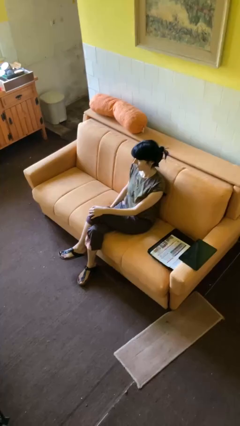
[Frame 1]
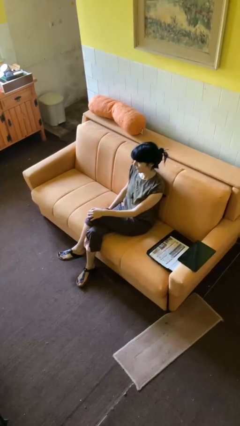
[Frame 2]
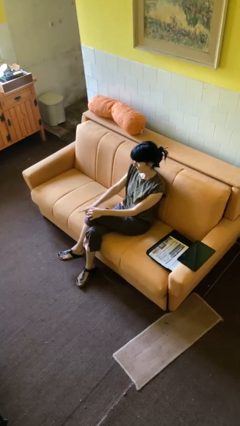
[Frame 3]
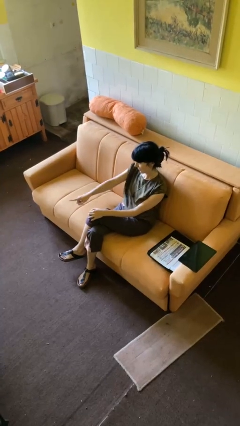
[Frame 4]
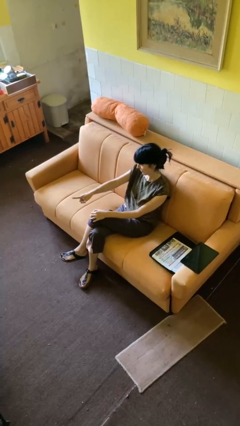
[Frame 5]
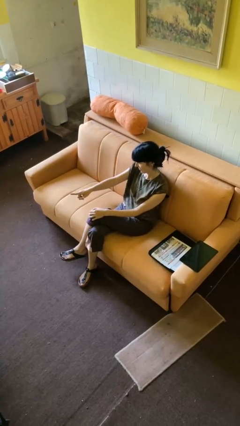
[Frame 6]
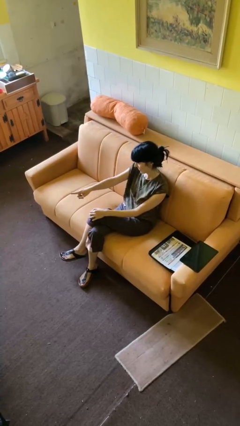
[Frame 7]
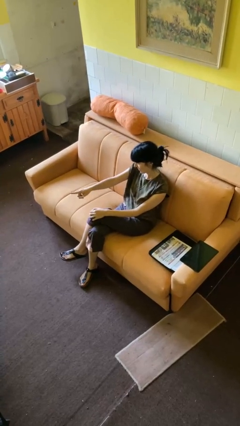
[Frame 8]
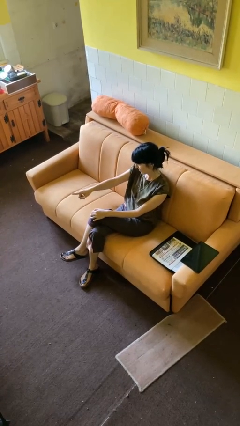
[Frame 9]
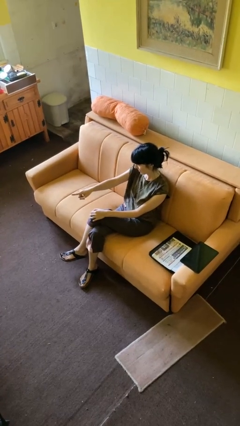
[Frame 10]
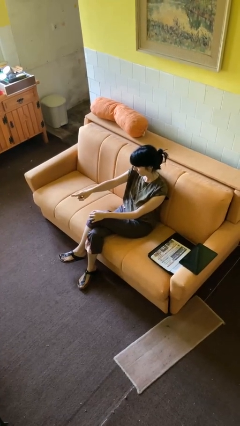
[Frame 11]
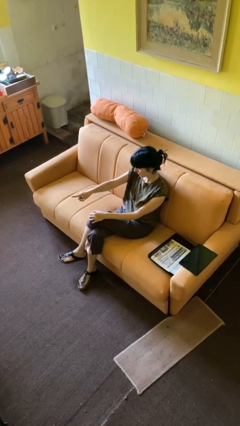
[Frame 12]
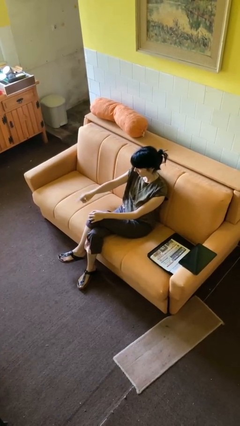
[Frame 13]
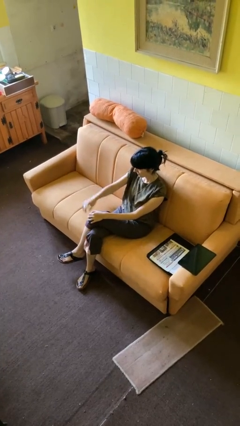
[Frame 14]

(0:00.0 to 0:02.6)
person points at person

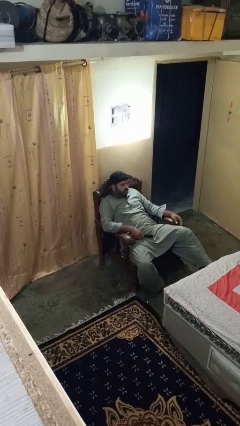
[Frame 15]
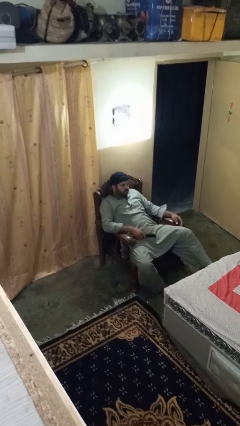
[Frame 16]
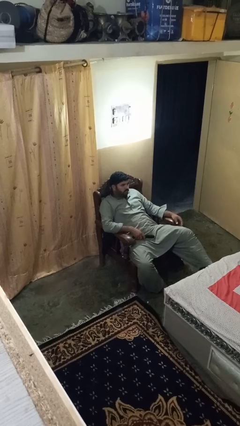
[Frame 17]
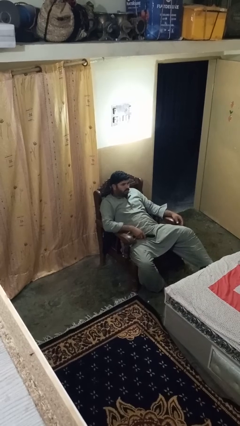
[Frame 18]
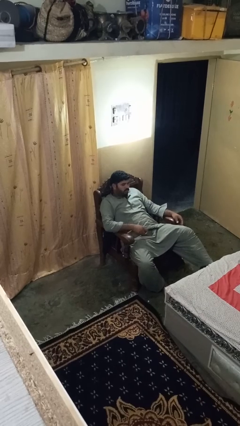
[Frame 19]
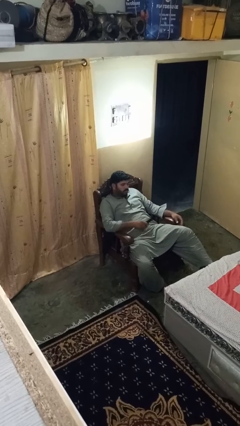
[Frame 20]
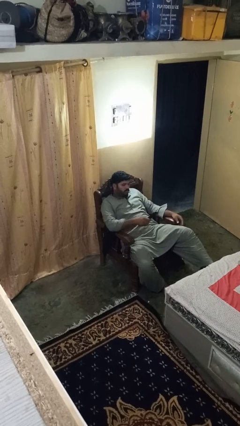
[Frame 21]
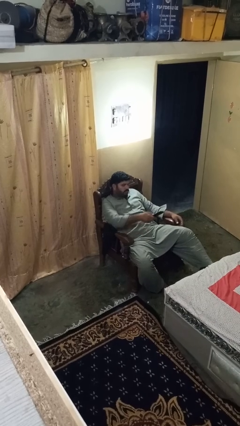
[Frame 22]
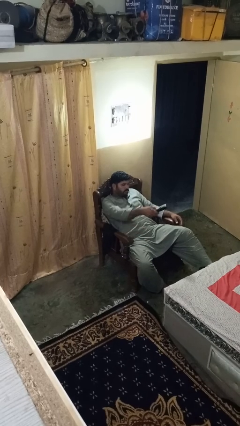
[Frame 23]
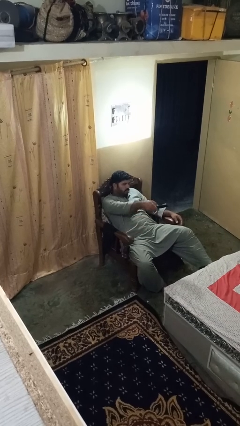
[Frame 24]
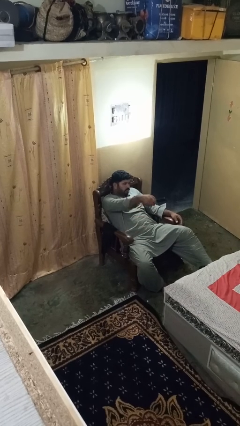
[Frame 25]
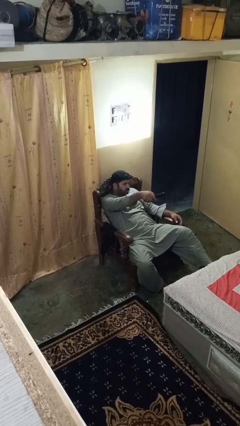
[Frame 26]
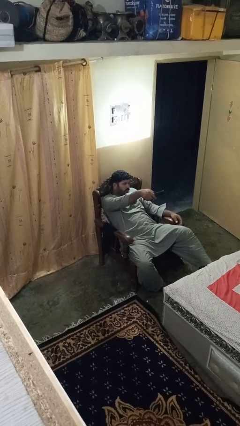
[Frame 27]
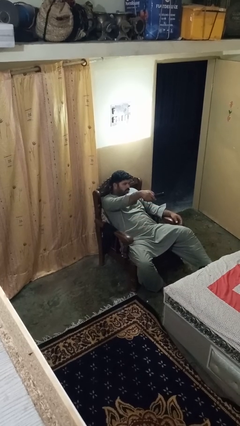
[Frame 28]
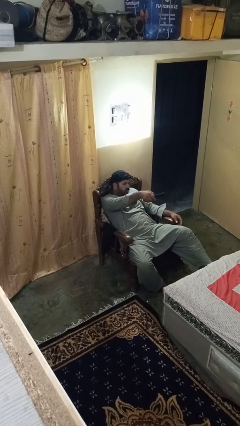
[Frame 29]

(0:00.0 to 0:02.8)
person uses television remote

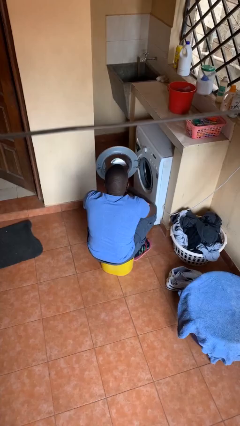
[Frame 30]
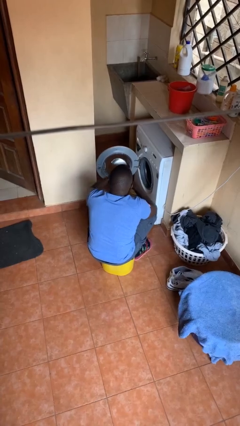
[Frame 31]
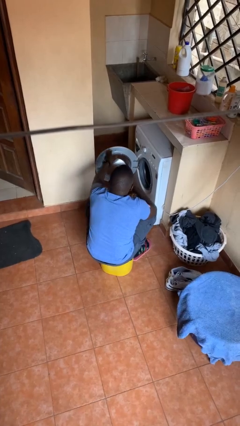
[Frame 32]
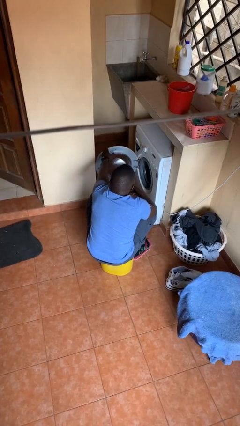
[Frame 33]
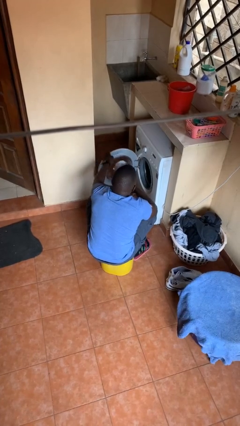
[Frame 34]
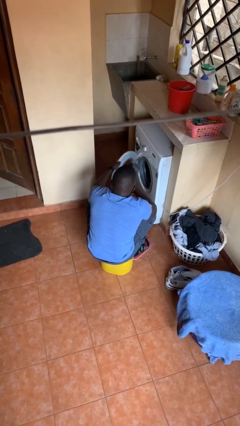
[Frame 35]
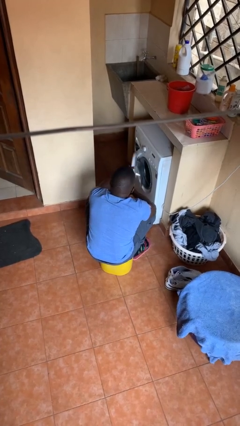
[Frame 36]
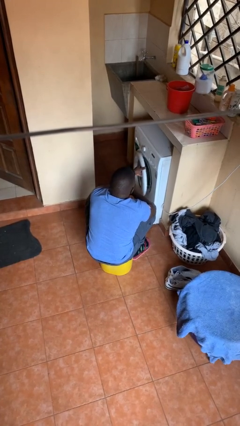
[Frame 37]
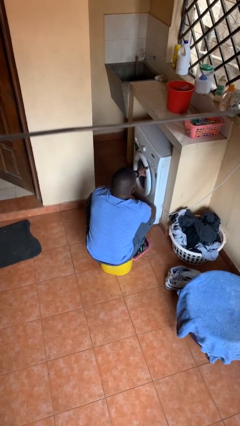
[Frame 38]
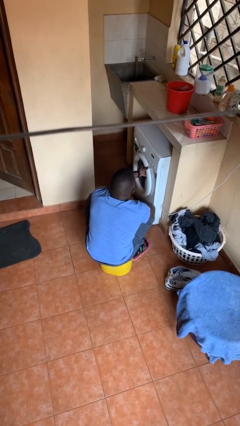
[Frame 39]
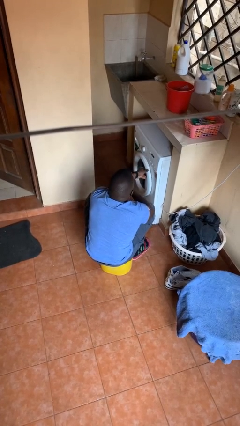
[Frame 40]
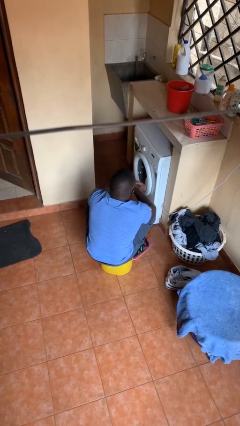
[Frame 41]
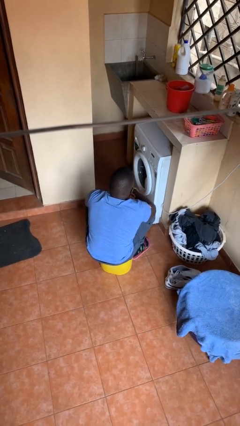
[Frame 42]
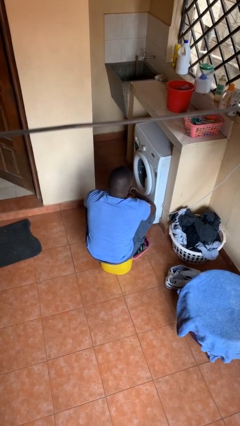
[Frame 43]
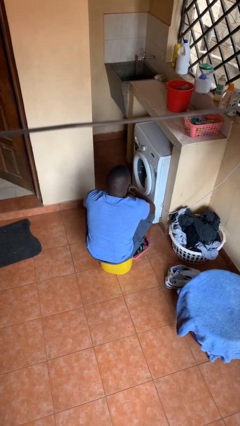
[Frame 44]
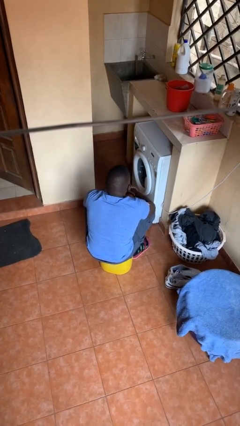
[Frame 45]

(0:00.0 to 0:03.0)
person closes clothes washer

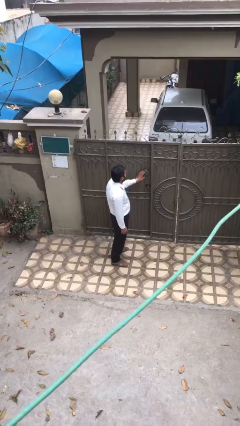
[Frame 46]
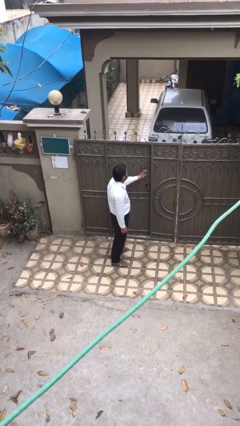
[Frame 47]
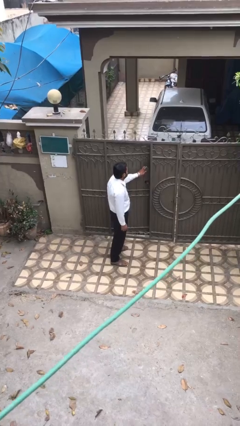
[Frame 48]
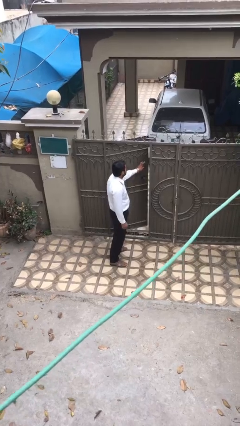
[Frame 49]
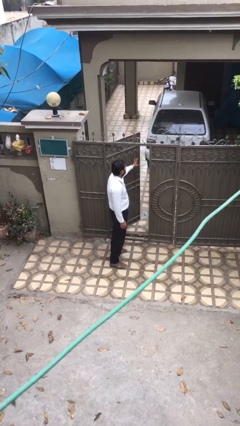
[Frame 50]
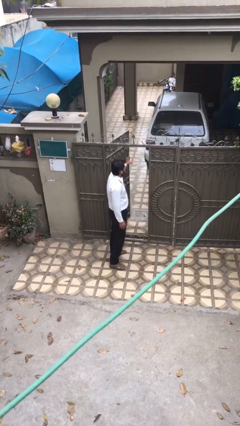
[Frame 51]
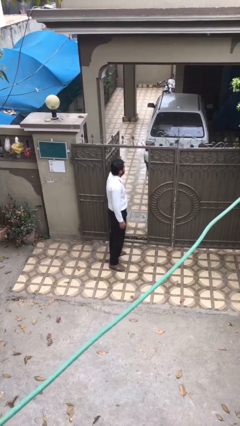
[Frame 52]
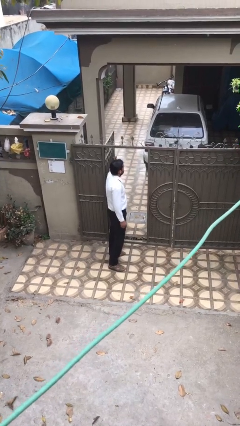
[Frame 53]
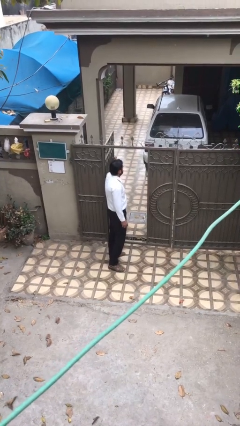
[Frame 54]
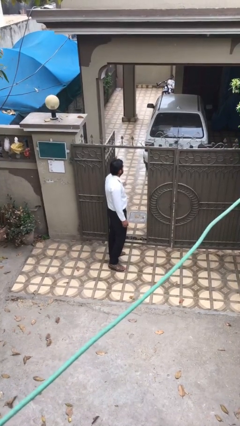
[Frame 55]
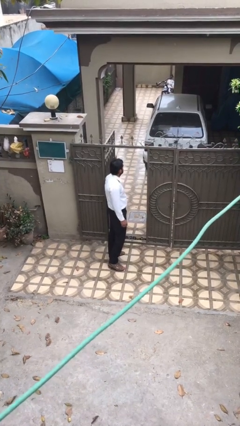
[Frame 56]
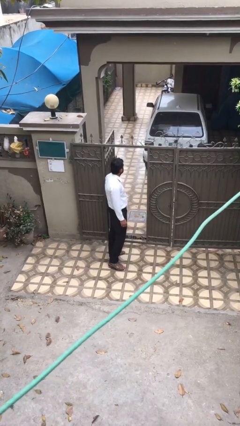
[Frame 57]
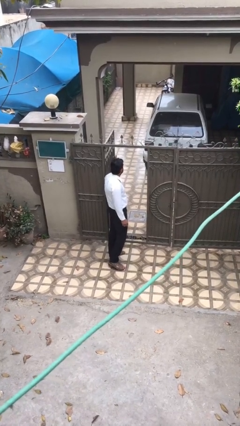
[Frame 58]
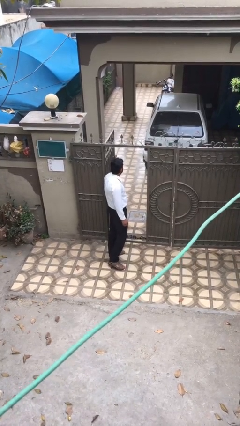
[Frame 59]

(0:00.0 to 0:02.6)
person opens facility door

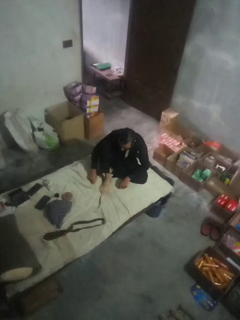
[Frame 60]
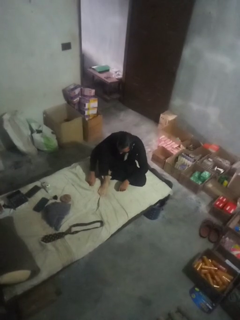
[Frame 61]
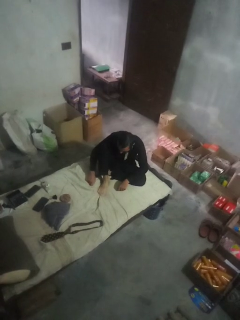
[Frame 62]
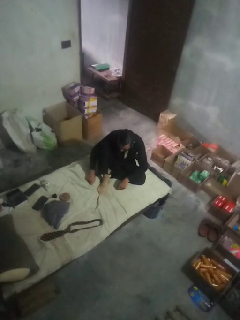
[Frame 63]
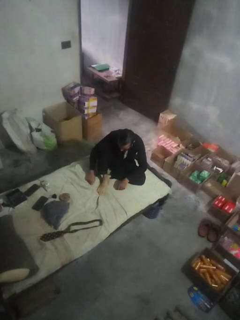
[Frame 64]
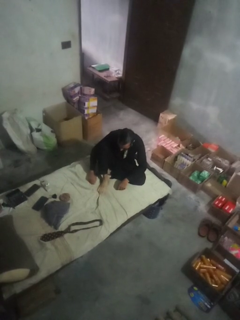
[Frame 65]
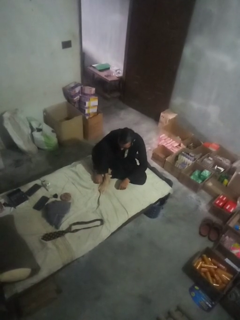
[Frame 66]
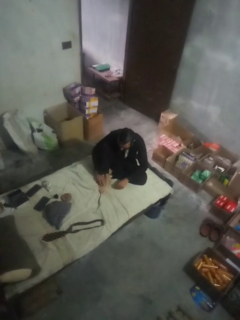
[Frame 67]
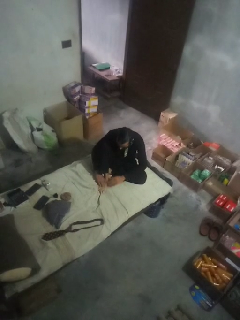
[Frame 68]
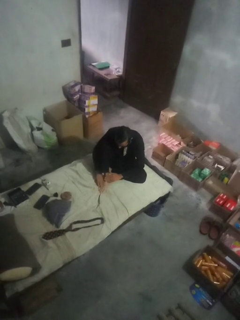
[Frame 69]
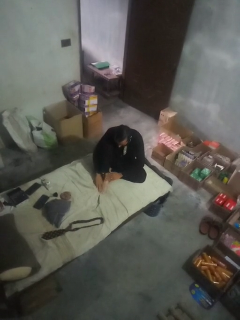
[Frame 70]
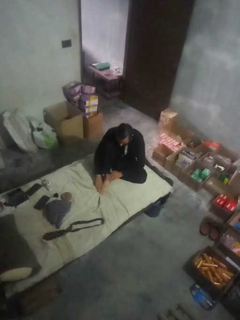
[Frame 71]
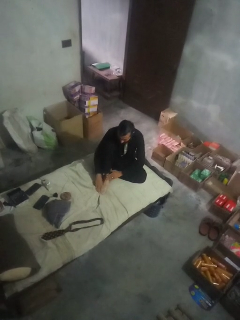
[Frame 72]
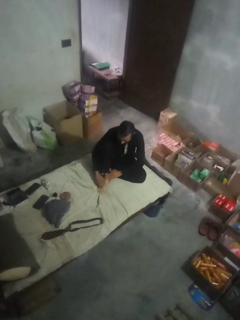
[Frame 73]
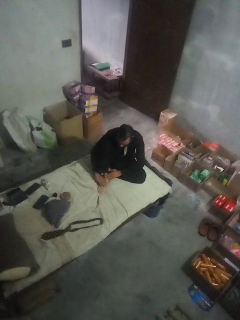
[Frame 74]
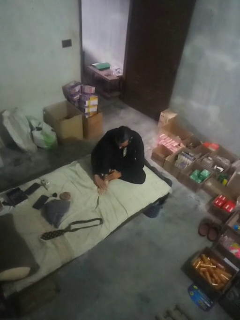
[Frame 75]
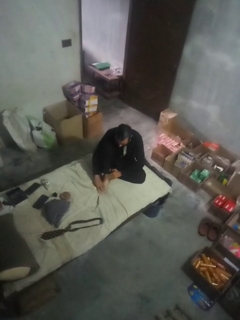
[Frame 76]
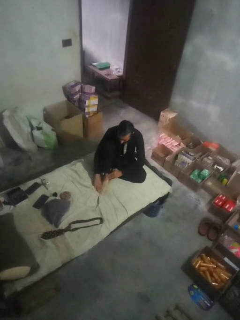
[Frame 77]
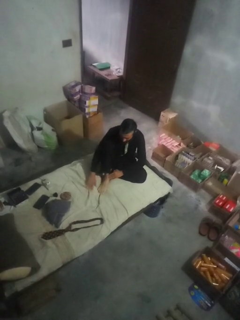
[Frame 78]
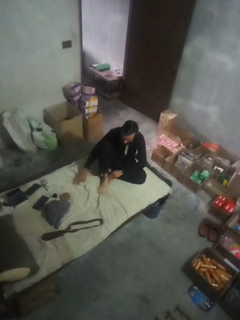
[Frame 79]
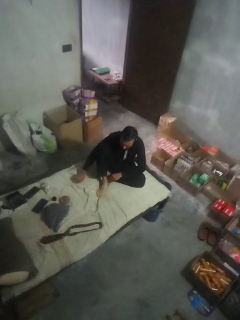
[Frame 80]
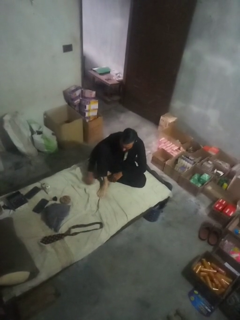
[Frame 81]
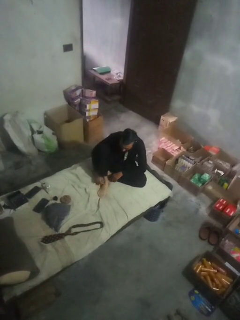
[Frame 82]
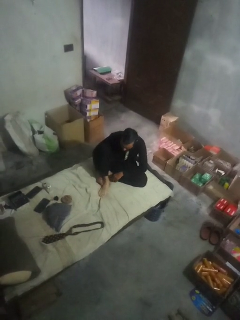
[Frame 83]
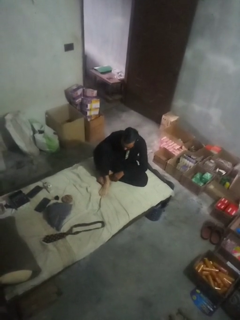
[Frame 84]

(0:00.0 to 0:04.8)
person rubs foot

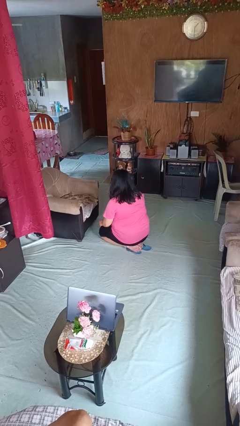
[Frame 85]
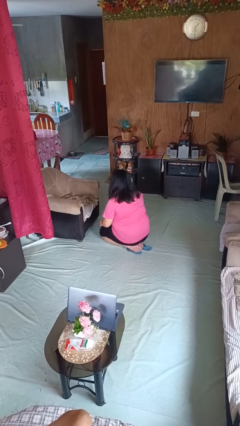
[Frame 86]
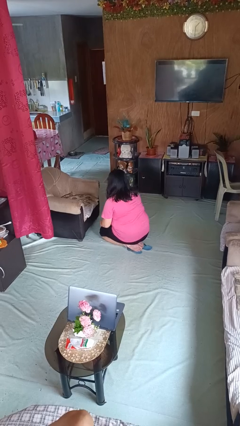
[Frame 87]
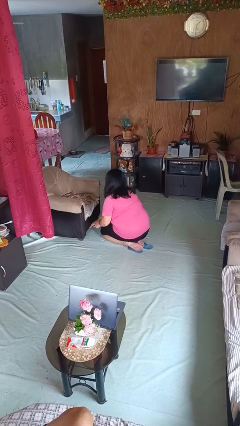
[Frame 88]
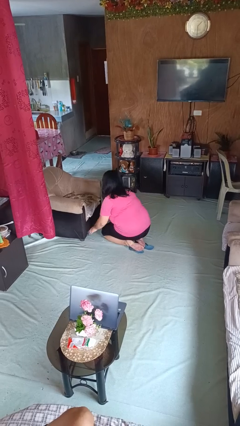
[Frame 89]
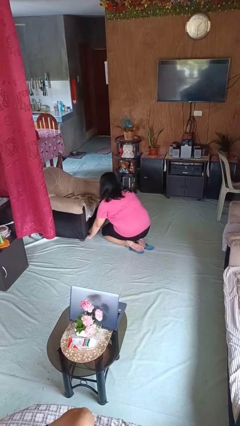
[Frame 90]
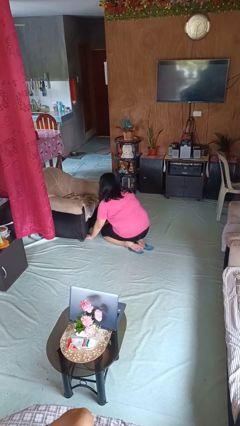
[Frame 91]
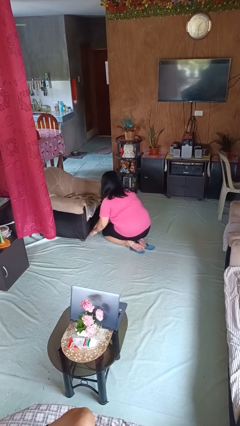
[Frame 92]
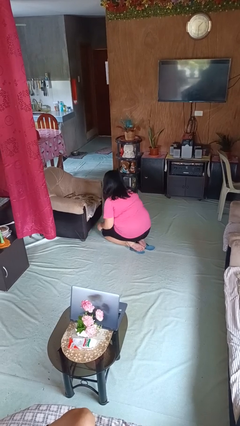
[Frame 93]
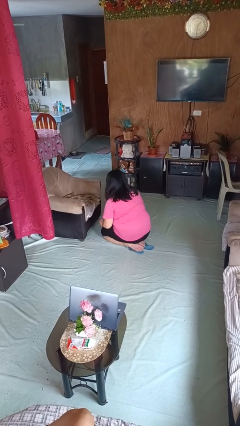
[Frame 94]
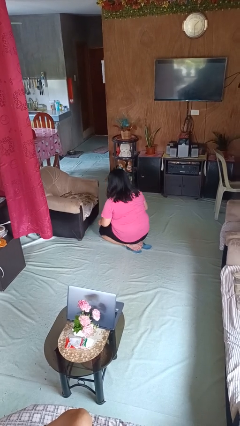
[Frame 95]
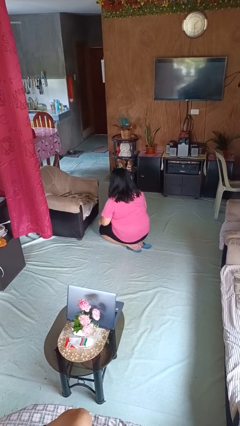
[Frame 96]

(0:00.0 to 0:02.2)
person searches under couch

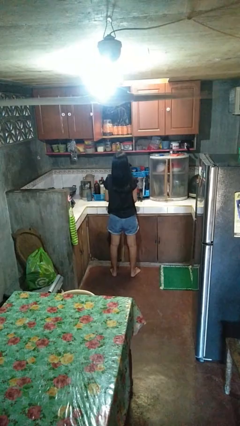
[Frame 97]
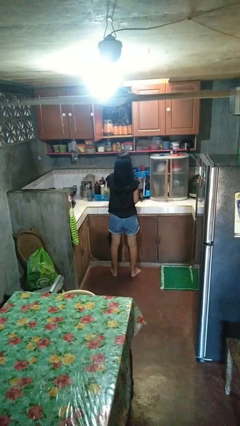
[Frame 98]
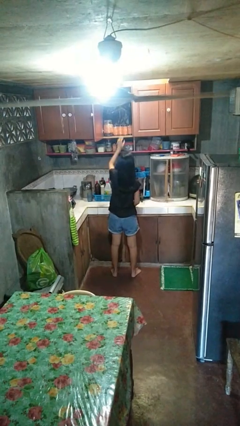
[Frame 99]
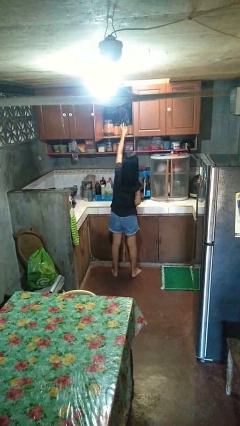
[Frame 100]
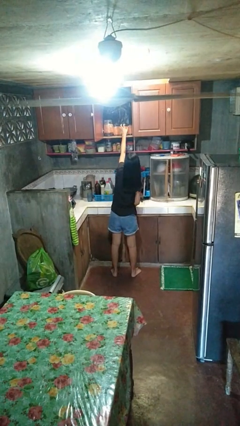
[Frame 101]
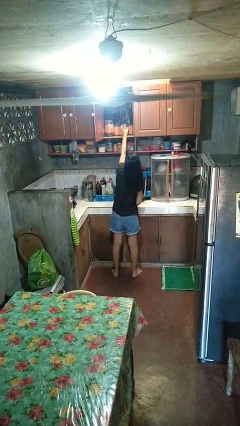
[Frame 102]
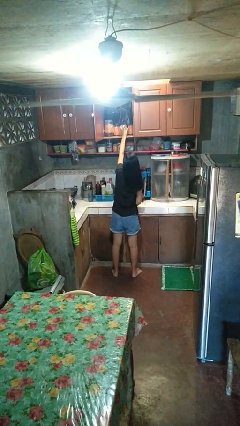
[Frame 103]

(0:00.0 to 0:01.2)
person picks up object from cabinet
